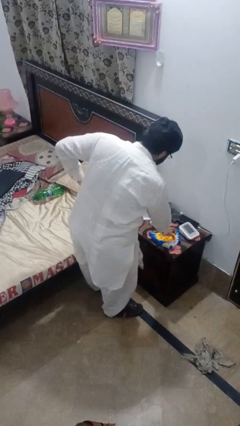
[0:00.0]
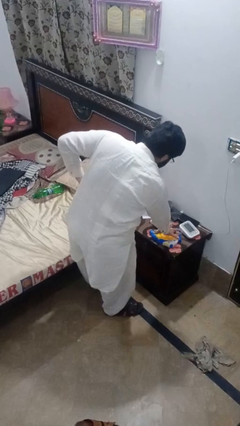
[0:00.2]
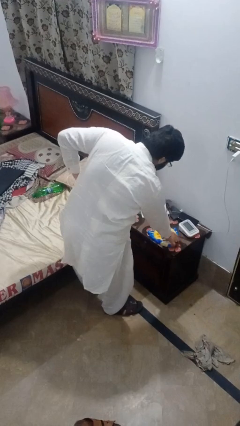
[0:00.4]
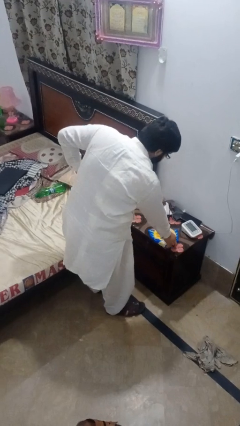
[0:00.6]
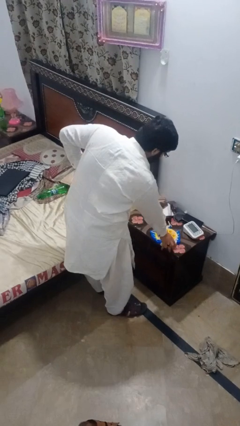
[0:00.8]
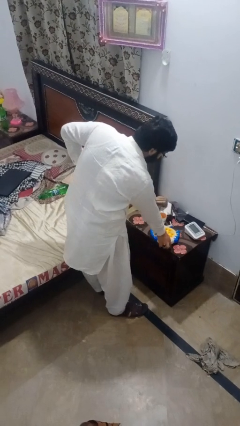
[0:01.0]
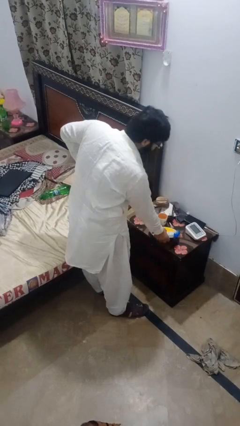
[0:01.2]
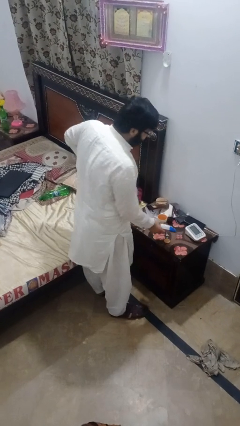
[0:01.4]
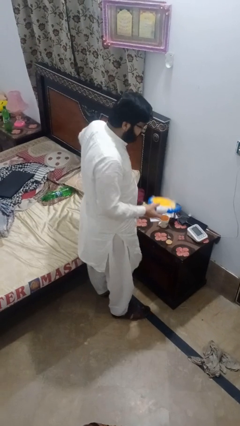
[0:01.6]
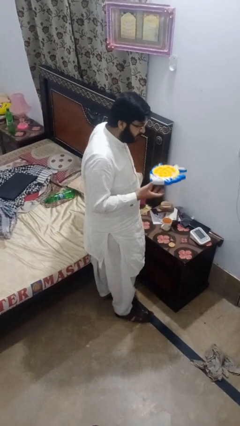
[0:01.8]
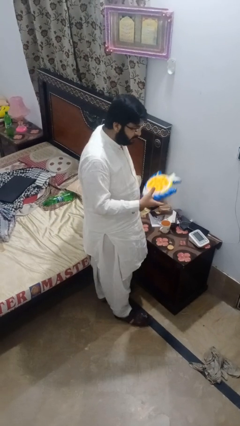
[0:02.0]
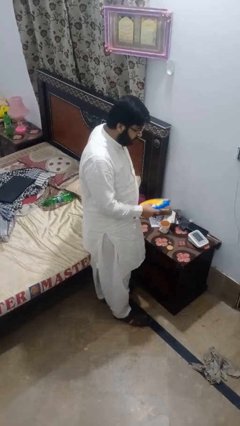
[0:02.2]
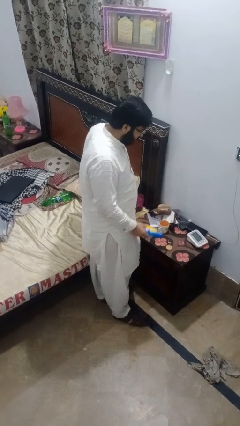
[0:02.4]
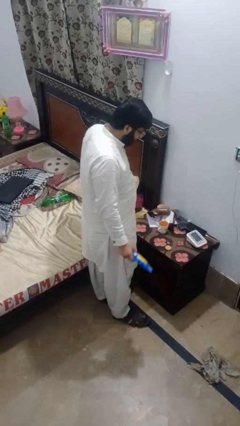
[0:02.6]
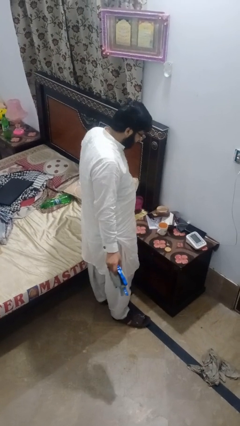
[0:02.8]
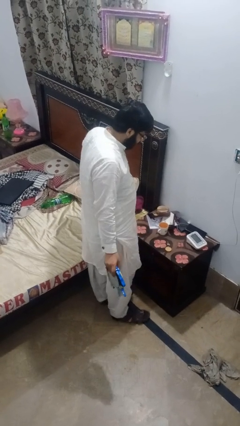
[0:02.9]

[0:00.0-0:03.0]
person picks up object from countertop

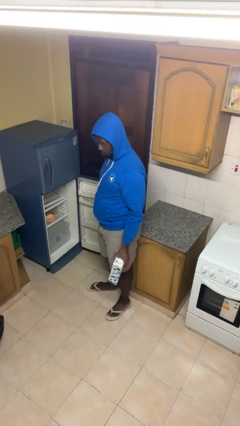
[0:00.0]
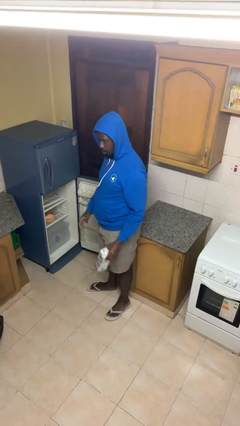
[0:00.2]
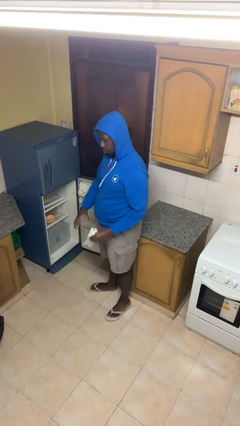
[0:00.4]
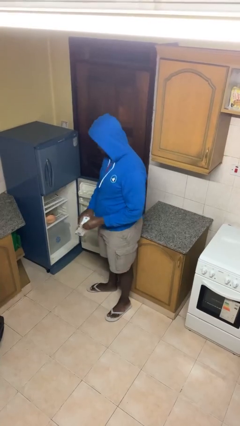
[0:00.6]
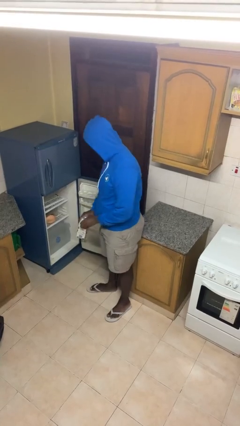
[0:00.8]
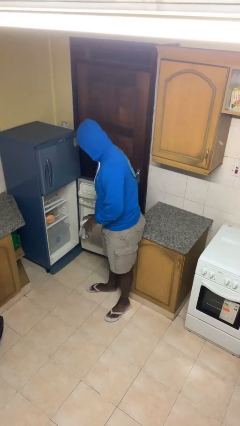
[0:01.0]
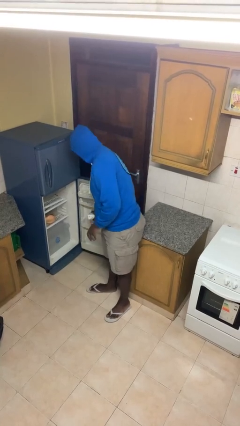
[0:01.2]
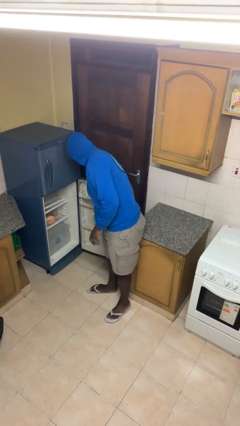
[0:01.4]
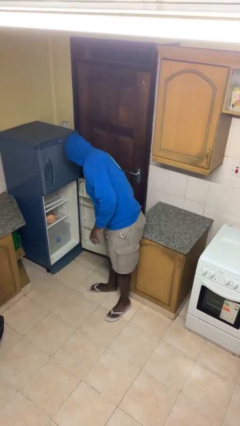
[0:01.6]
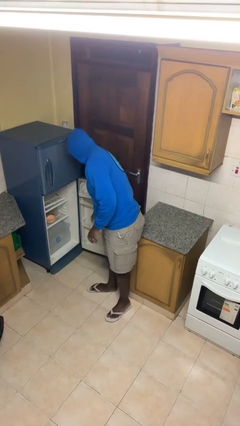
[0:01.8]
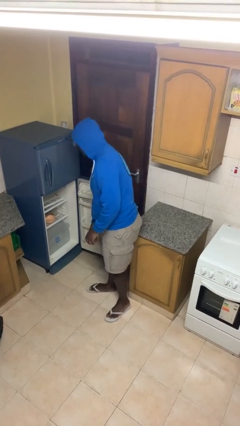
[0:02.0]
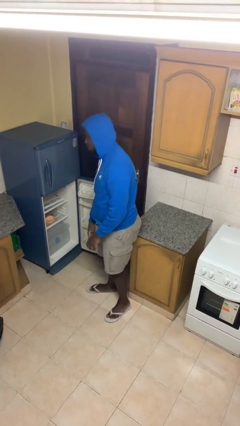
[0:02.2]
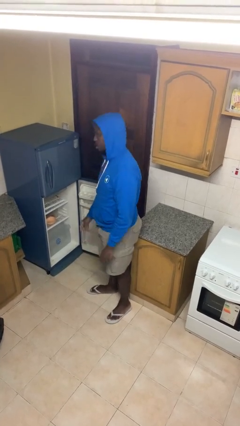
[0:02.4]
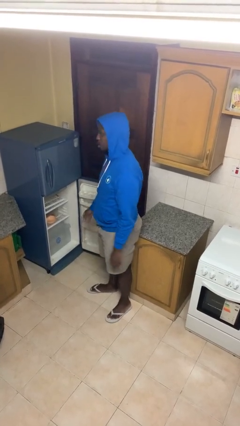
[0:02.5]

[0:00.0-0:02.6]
person puts object into refrigerator

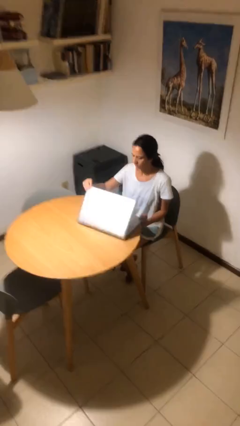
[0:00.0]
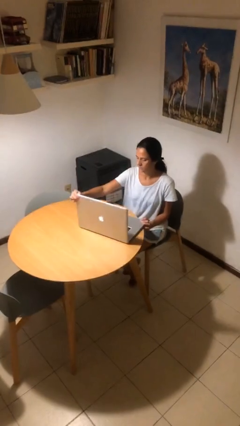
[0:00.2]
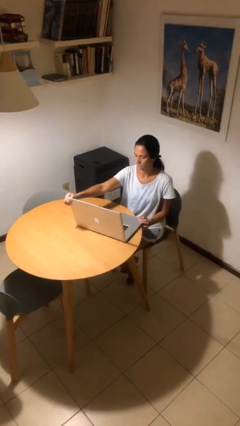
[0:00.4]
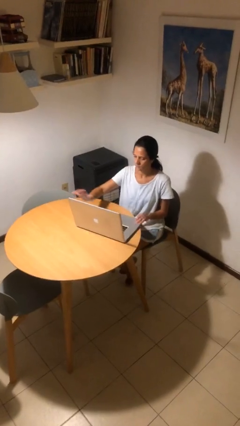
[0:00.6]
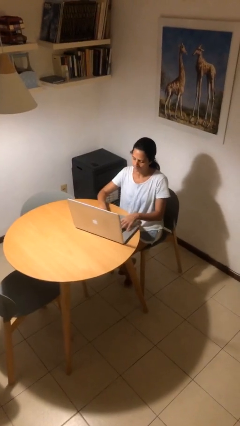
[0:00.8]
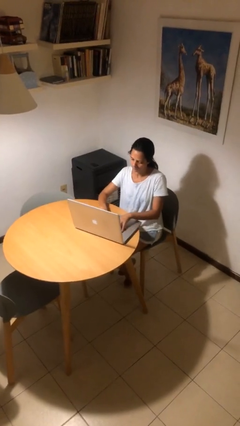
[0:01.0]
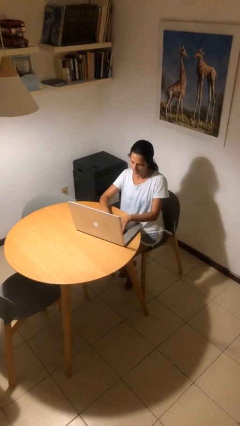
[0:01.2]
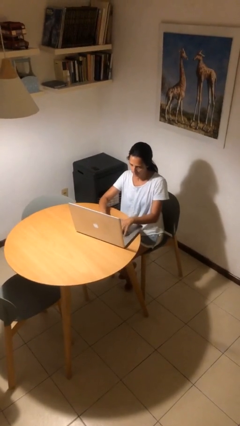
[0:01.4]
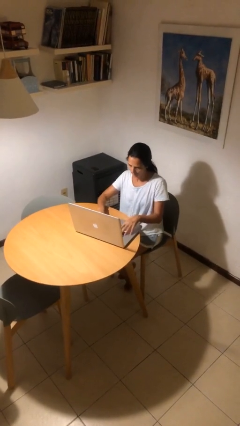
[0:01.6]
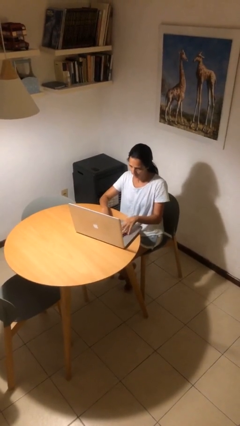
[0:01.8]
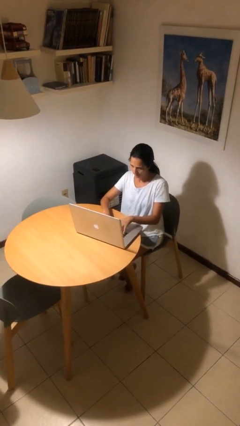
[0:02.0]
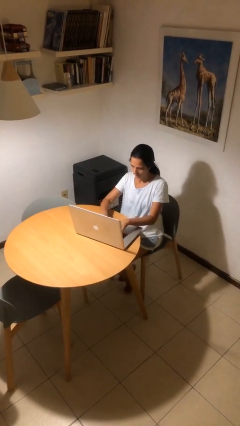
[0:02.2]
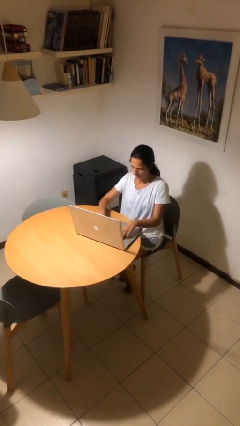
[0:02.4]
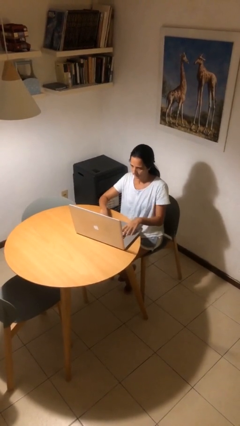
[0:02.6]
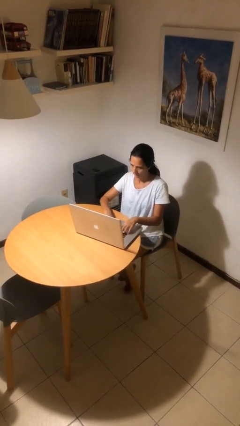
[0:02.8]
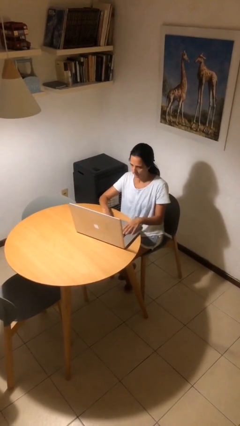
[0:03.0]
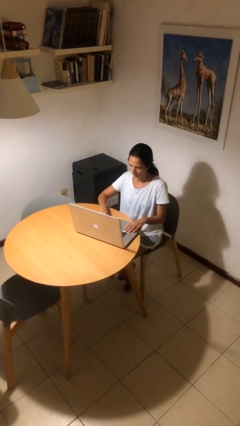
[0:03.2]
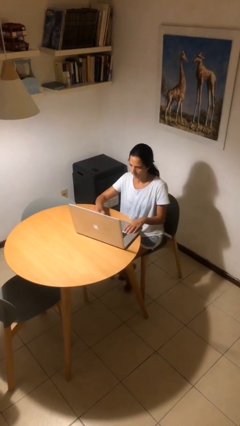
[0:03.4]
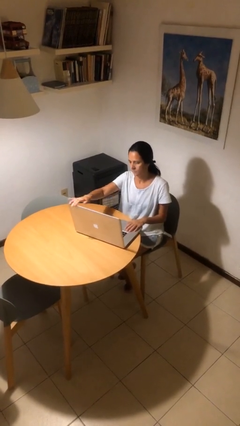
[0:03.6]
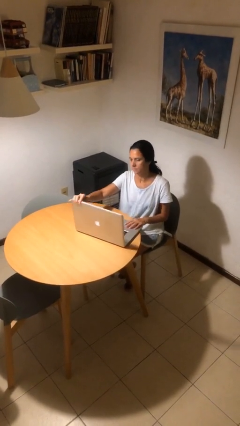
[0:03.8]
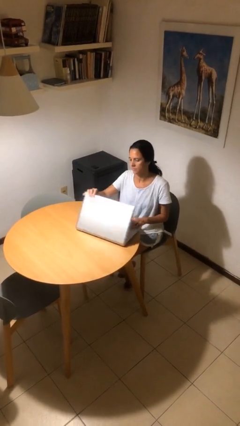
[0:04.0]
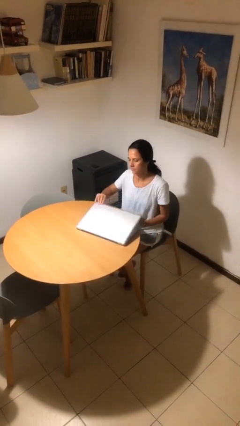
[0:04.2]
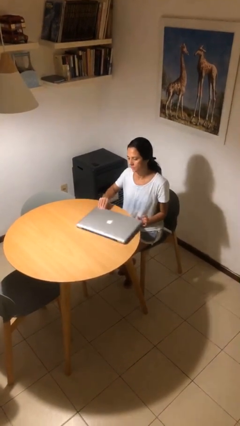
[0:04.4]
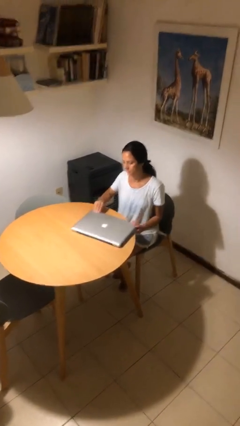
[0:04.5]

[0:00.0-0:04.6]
person interacts with laptop

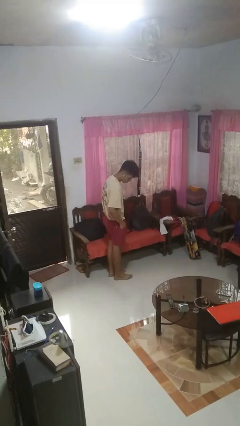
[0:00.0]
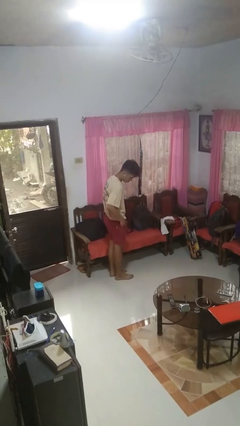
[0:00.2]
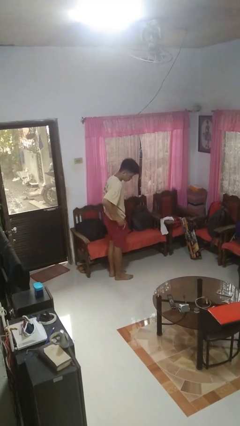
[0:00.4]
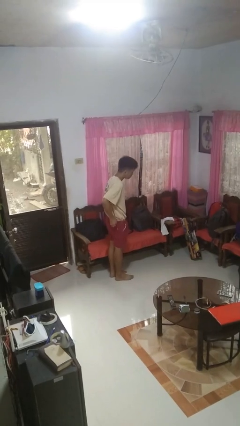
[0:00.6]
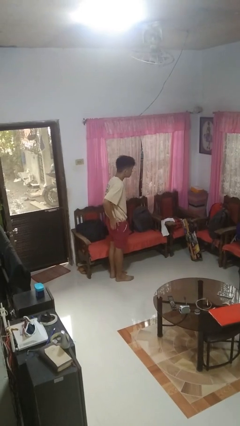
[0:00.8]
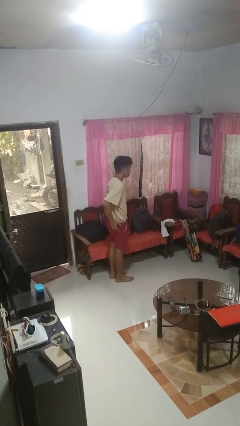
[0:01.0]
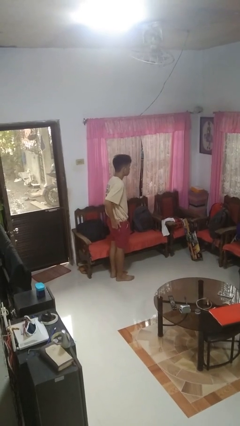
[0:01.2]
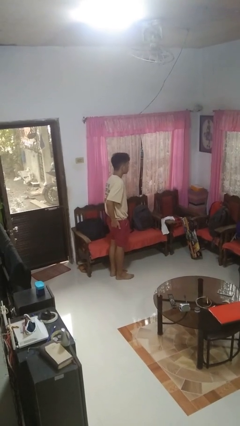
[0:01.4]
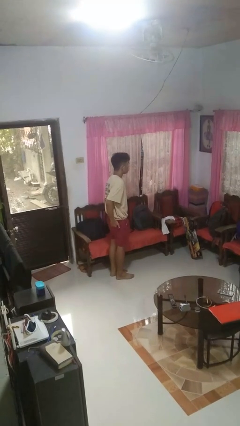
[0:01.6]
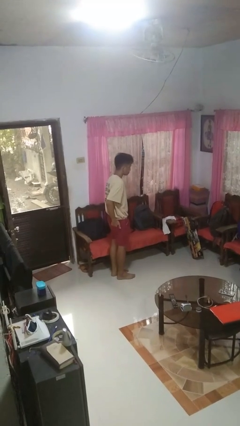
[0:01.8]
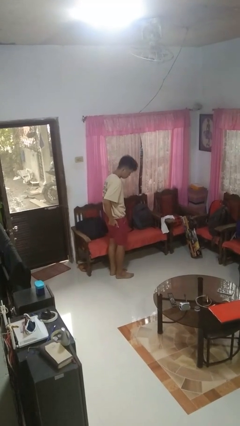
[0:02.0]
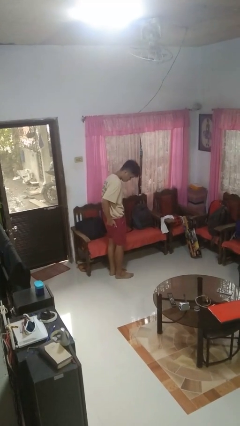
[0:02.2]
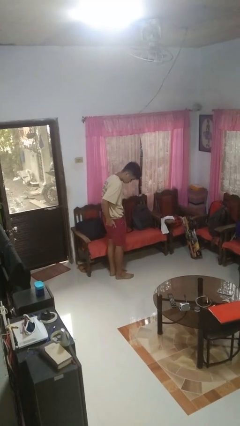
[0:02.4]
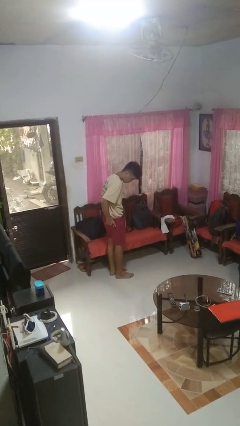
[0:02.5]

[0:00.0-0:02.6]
person puts hands in back pockets

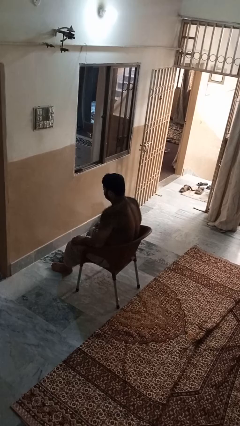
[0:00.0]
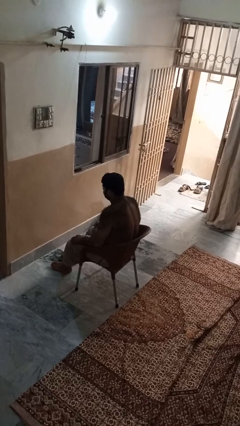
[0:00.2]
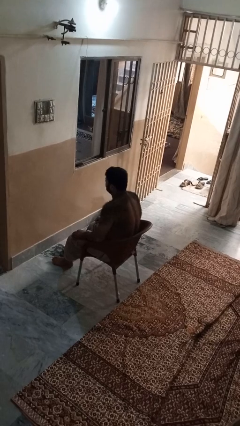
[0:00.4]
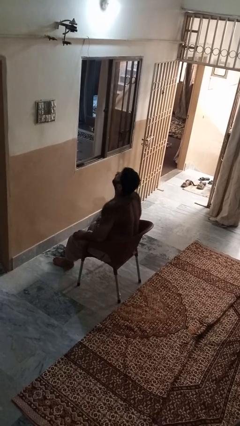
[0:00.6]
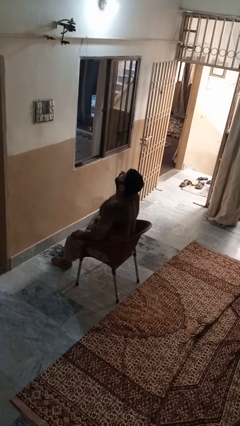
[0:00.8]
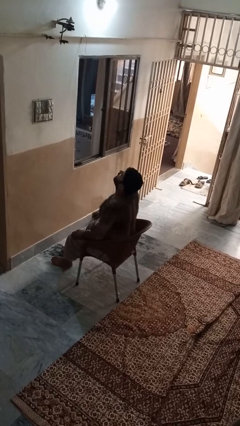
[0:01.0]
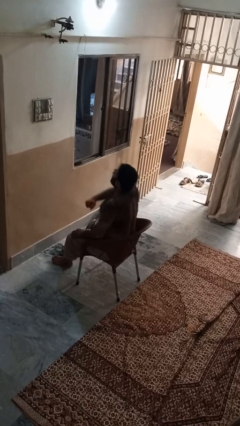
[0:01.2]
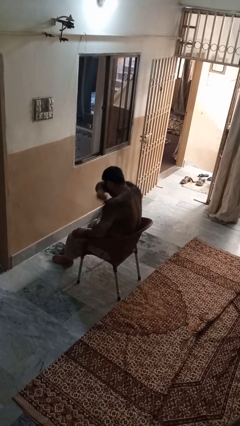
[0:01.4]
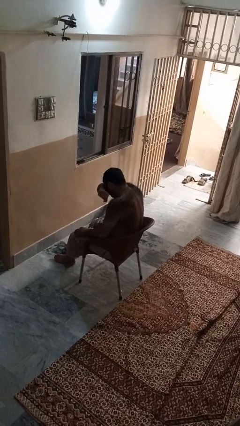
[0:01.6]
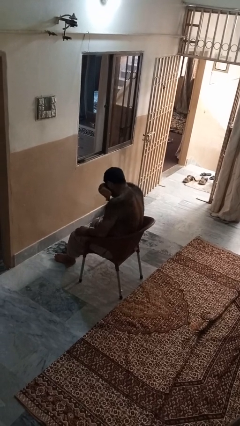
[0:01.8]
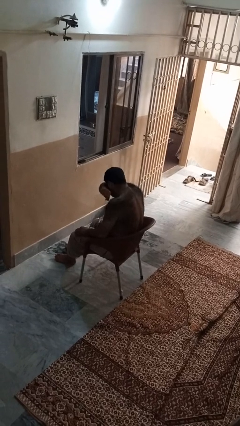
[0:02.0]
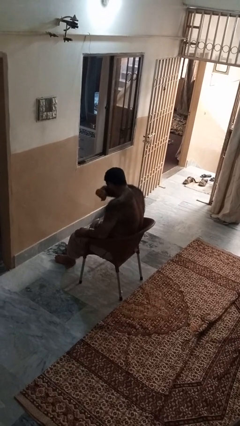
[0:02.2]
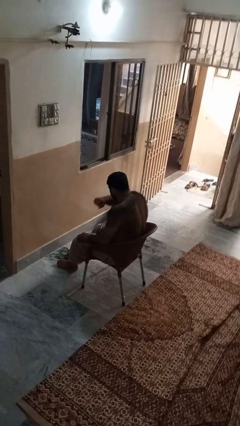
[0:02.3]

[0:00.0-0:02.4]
person sneezes into arm

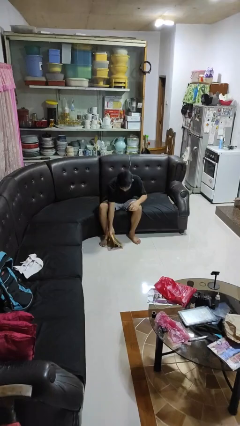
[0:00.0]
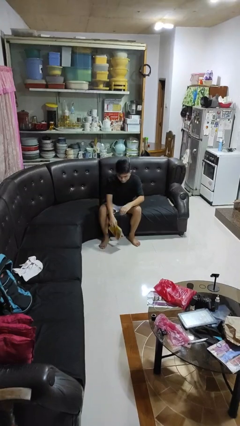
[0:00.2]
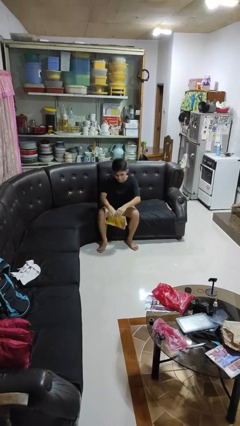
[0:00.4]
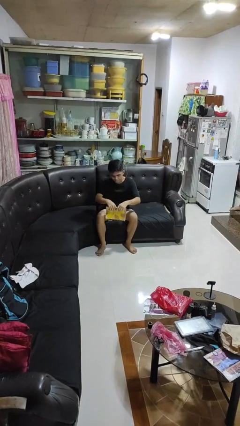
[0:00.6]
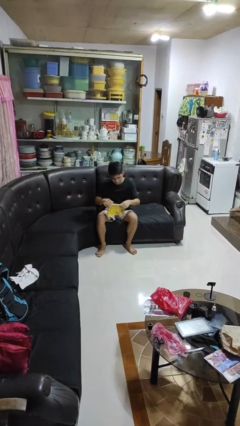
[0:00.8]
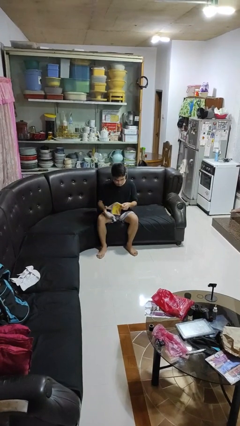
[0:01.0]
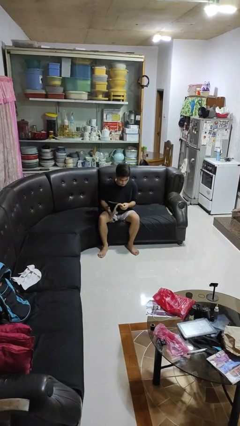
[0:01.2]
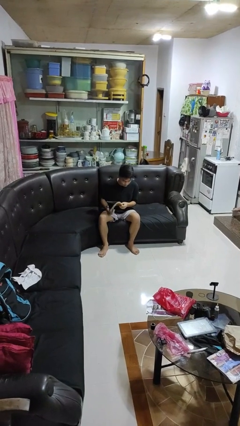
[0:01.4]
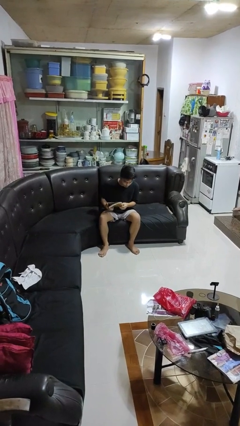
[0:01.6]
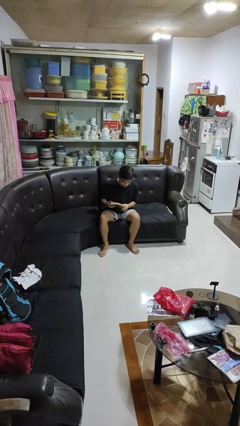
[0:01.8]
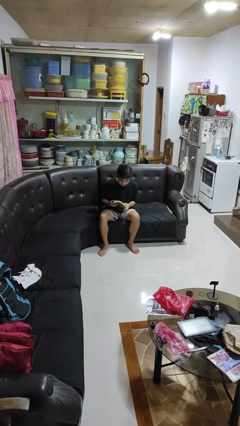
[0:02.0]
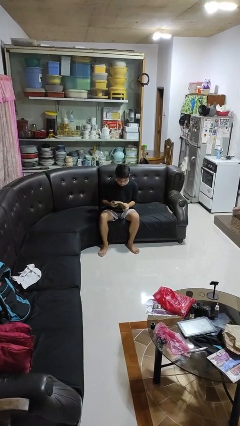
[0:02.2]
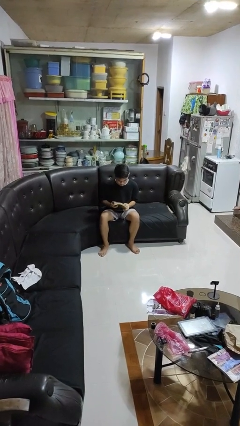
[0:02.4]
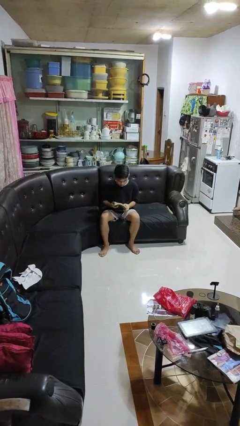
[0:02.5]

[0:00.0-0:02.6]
person picks up object from floor
